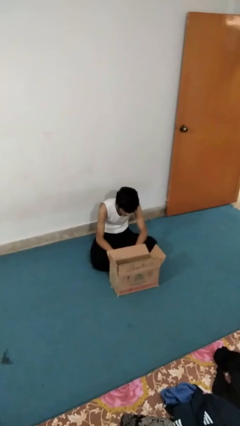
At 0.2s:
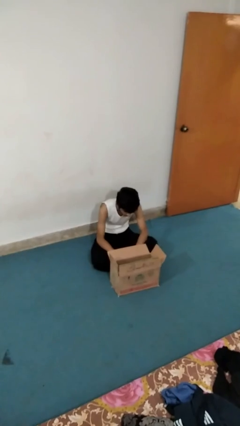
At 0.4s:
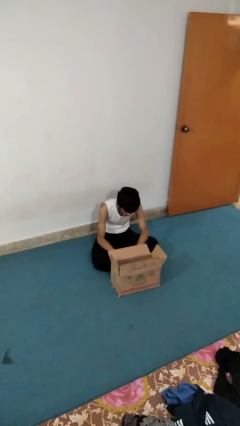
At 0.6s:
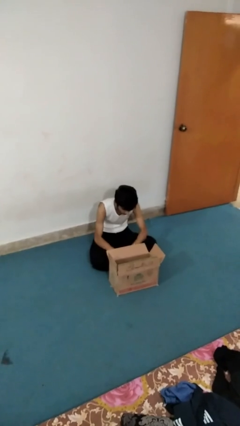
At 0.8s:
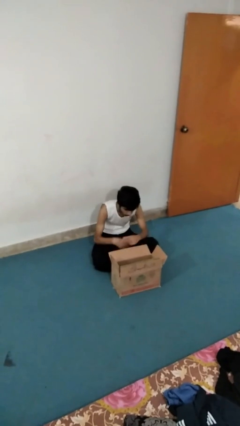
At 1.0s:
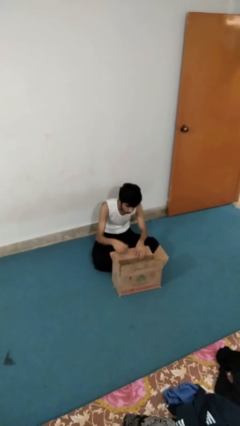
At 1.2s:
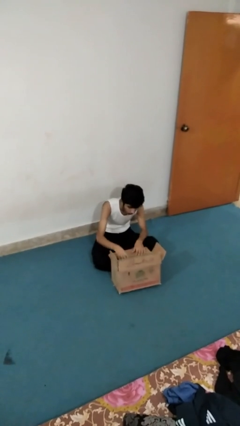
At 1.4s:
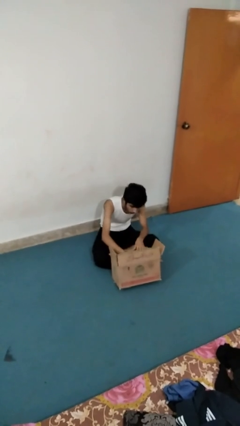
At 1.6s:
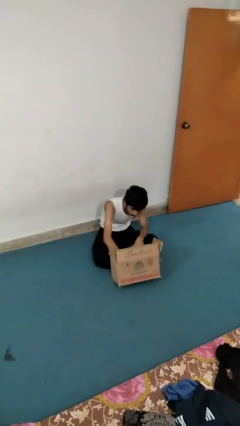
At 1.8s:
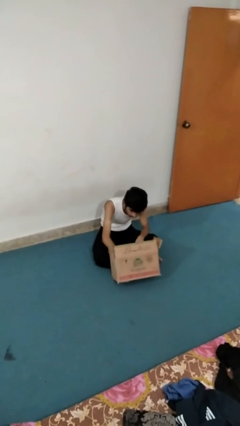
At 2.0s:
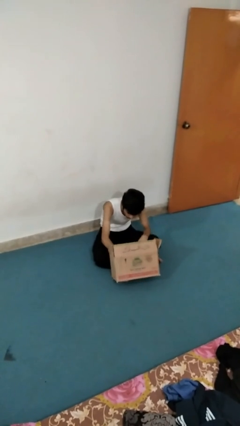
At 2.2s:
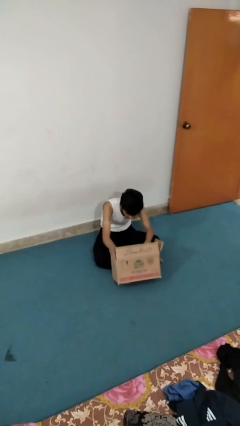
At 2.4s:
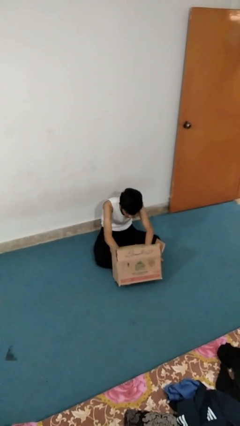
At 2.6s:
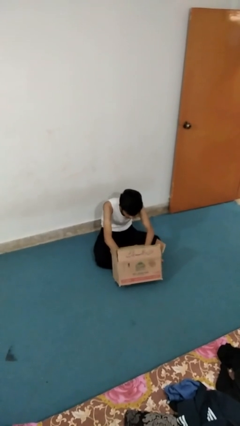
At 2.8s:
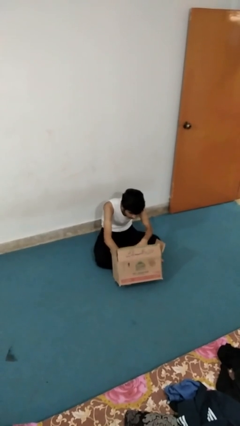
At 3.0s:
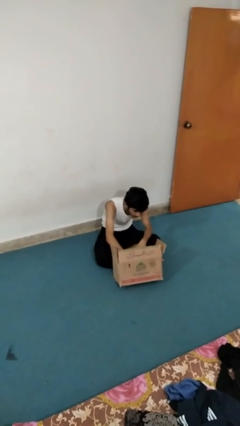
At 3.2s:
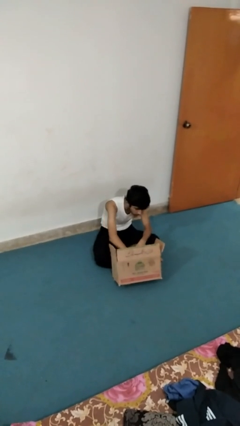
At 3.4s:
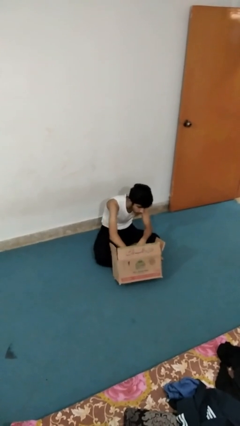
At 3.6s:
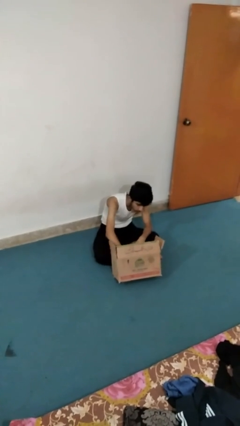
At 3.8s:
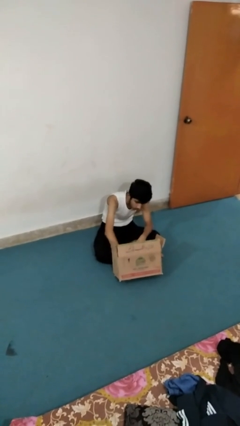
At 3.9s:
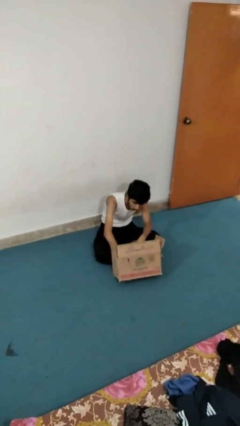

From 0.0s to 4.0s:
person searches in box

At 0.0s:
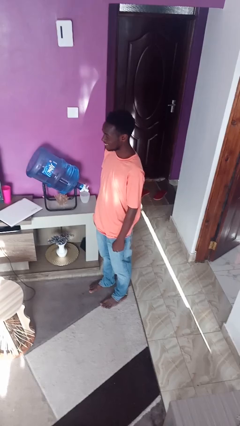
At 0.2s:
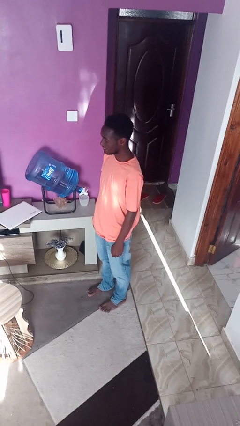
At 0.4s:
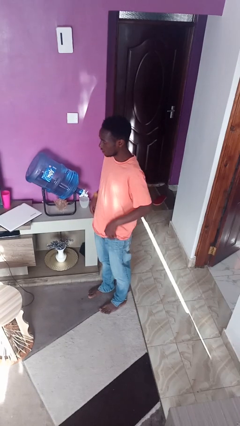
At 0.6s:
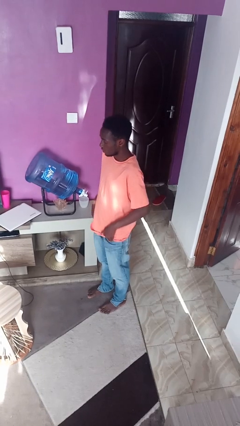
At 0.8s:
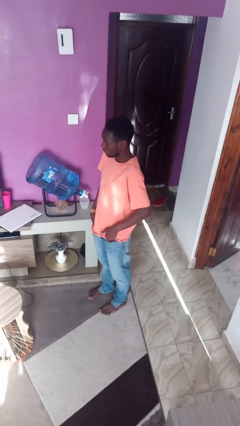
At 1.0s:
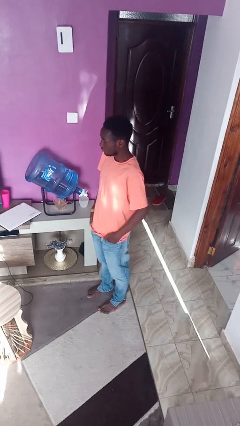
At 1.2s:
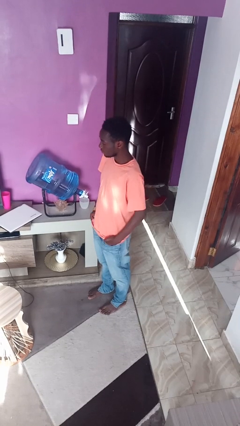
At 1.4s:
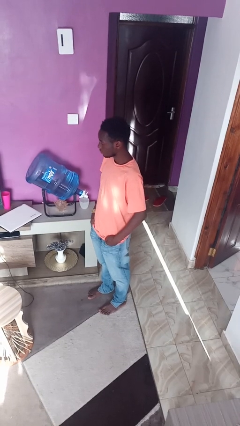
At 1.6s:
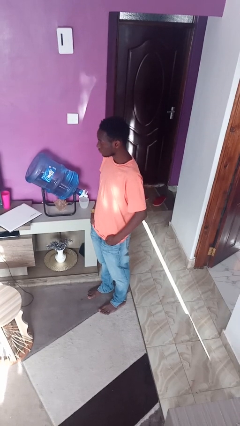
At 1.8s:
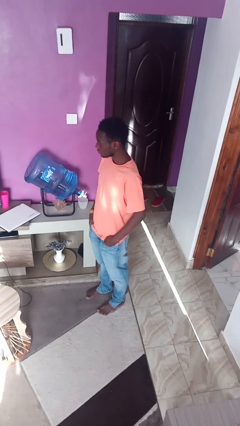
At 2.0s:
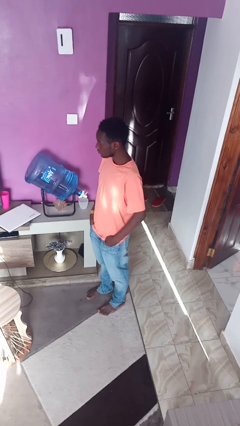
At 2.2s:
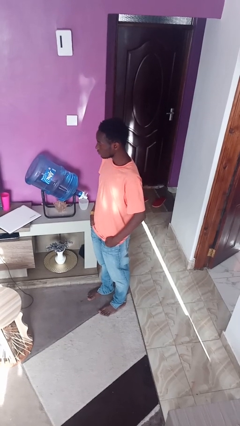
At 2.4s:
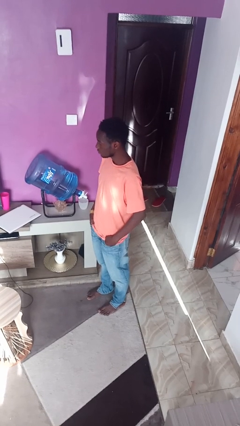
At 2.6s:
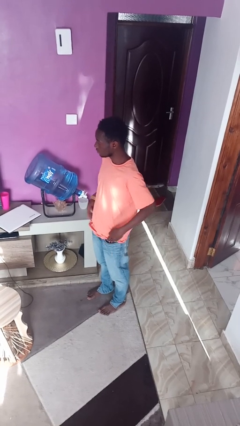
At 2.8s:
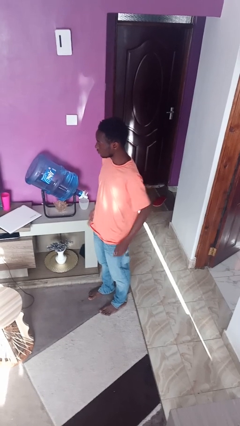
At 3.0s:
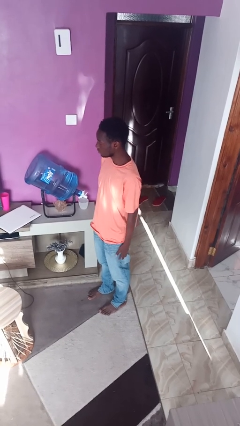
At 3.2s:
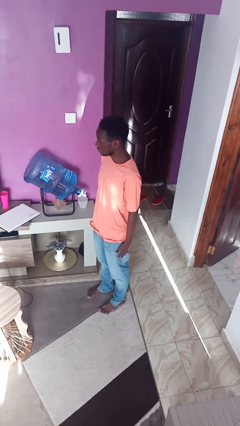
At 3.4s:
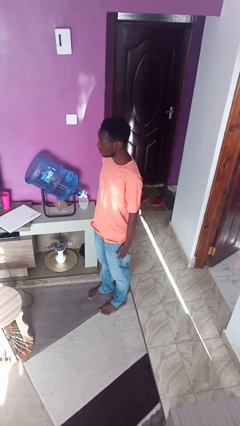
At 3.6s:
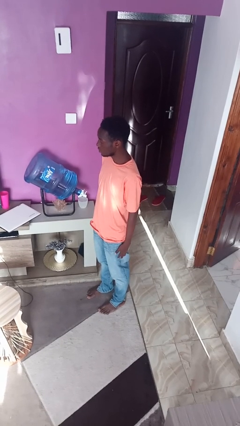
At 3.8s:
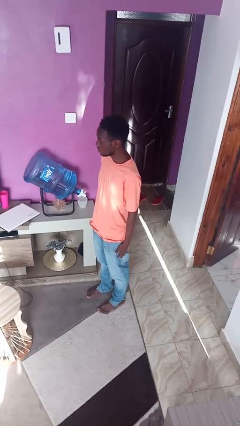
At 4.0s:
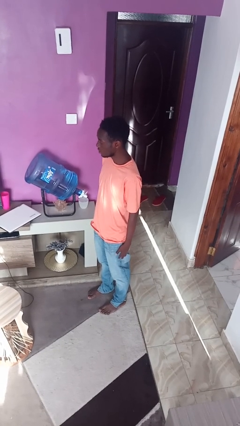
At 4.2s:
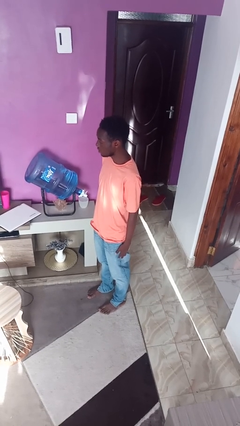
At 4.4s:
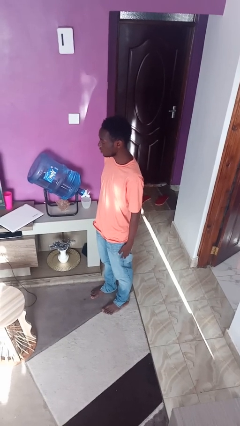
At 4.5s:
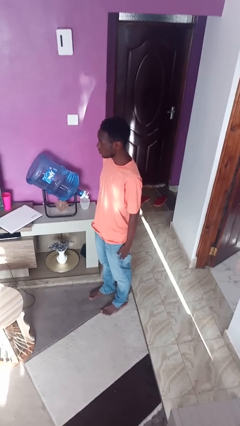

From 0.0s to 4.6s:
person puts hands in back pockets

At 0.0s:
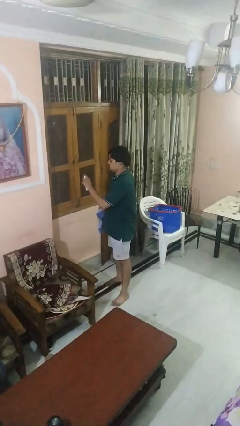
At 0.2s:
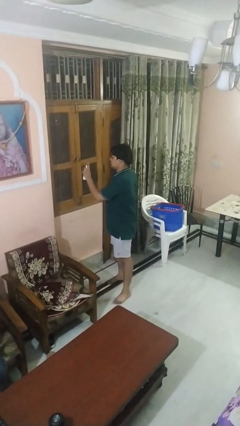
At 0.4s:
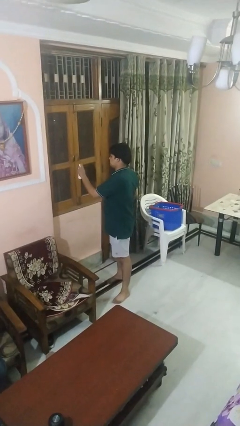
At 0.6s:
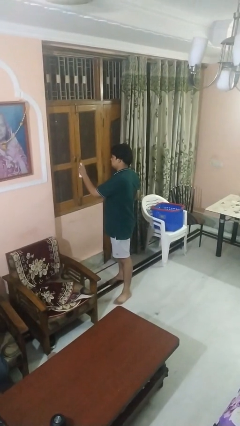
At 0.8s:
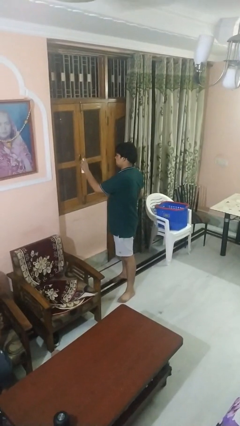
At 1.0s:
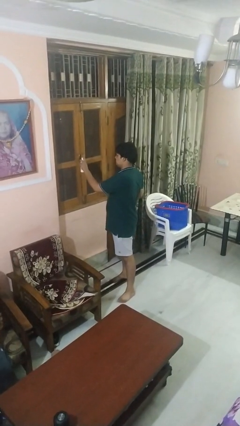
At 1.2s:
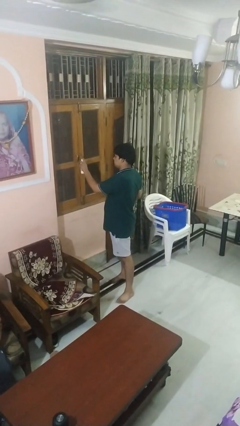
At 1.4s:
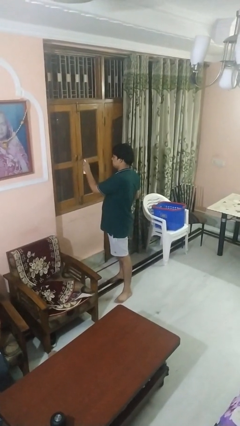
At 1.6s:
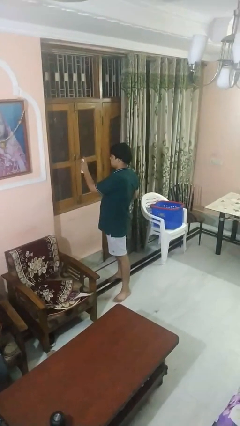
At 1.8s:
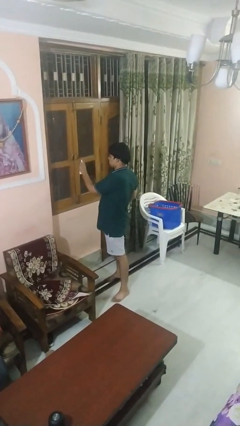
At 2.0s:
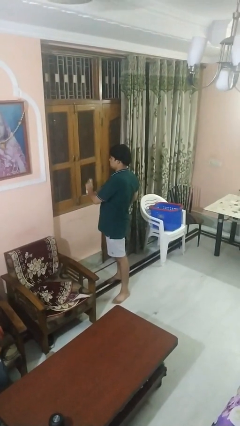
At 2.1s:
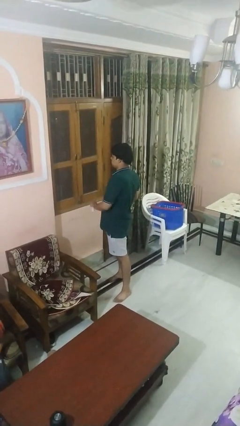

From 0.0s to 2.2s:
person sprays from bottle

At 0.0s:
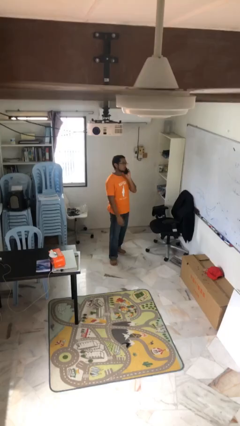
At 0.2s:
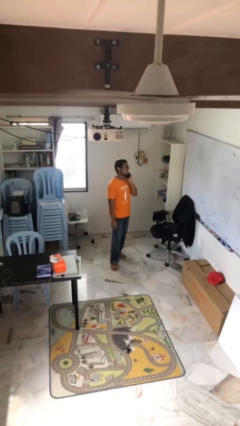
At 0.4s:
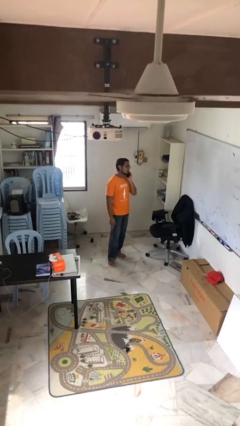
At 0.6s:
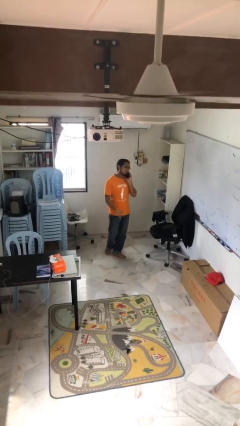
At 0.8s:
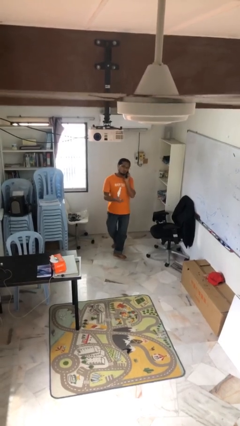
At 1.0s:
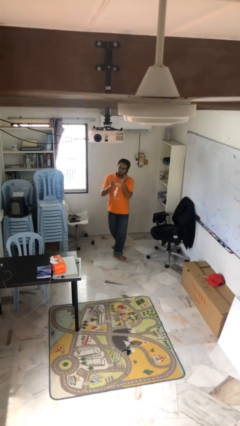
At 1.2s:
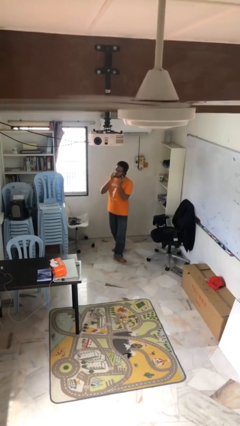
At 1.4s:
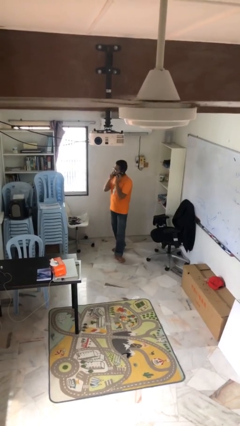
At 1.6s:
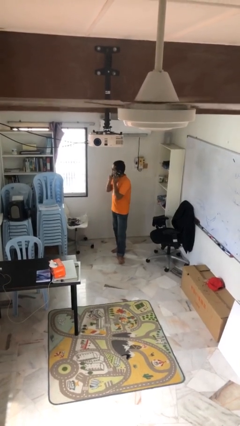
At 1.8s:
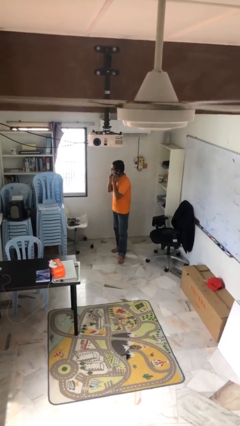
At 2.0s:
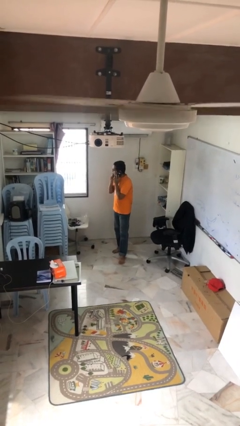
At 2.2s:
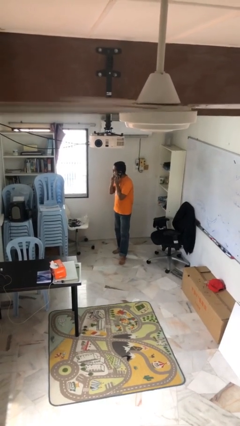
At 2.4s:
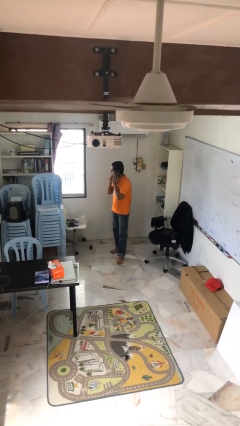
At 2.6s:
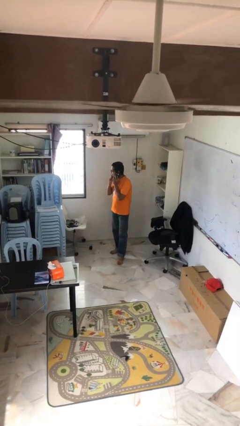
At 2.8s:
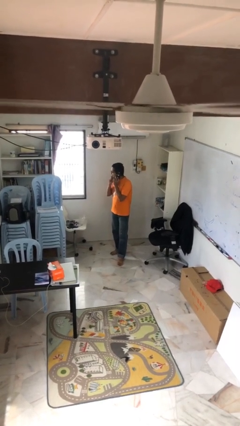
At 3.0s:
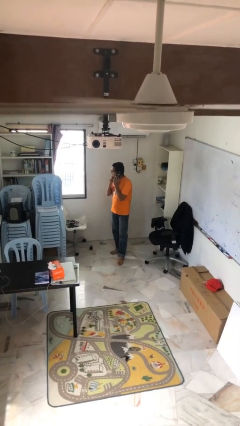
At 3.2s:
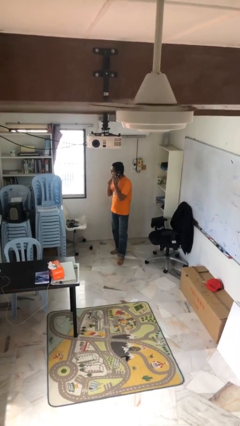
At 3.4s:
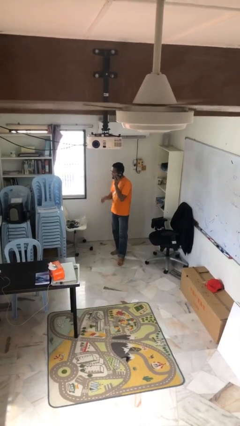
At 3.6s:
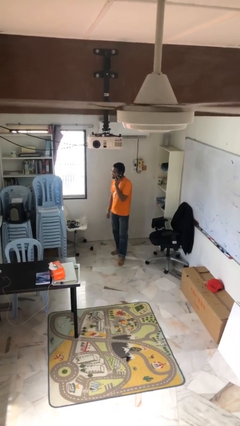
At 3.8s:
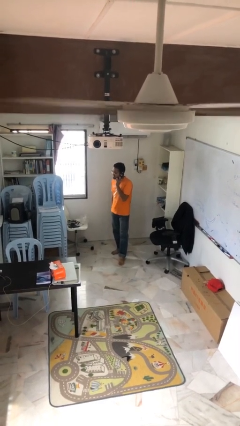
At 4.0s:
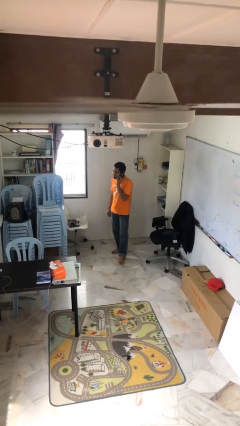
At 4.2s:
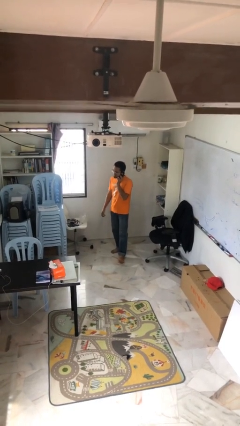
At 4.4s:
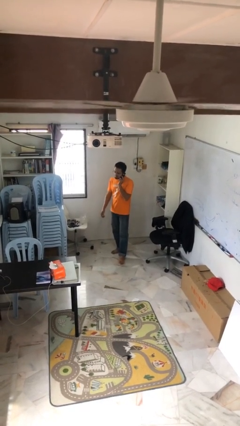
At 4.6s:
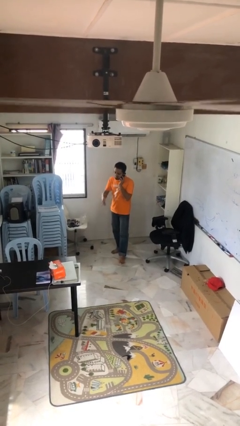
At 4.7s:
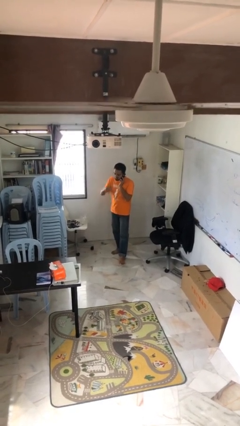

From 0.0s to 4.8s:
person talks on phone

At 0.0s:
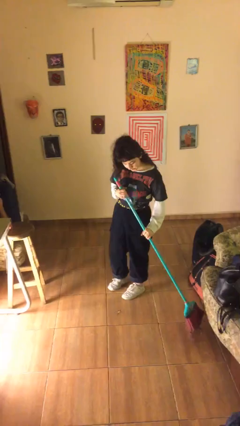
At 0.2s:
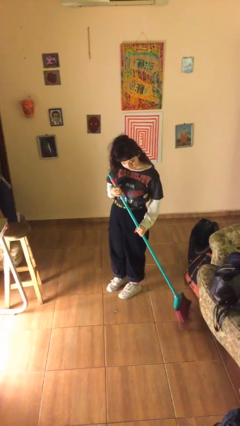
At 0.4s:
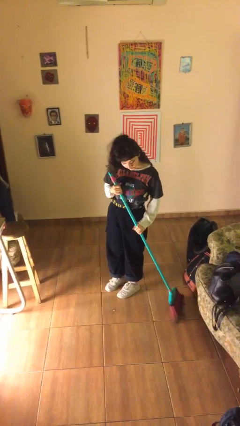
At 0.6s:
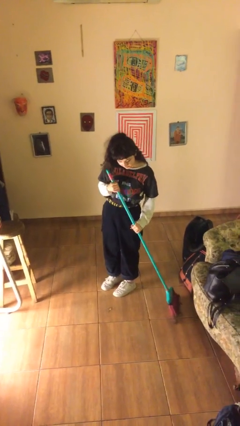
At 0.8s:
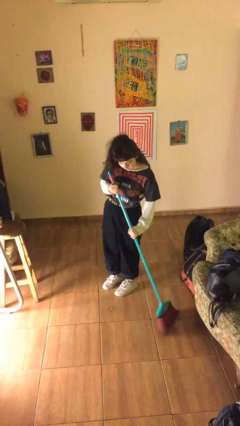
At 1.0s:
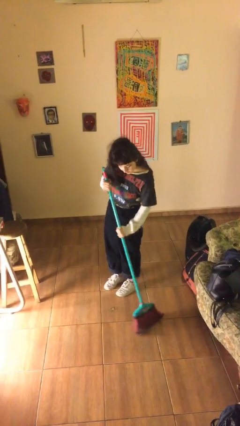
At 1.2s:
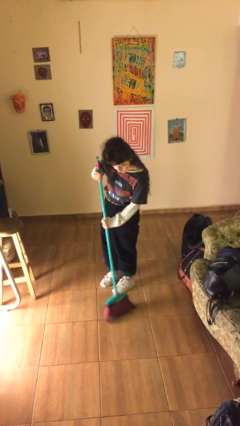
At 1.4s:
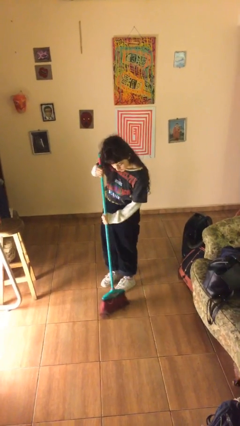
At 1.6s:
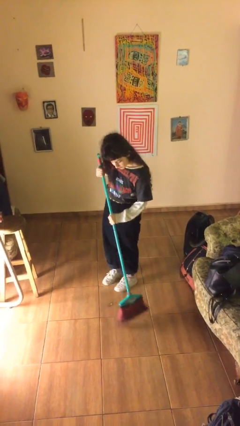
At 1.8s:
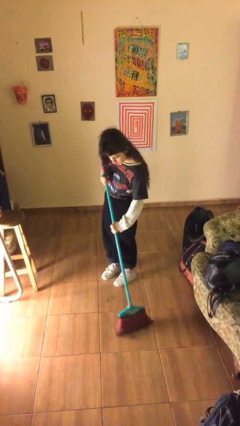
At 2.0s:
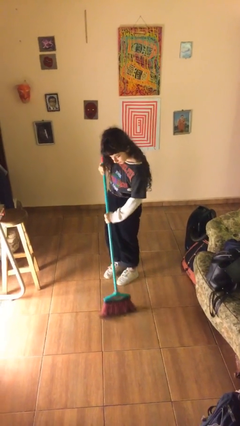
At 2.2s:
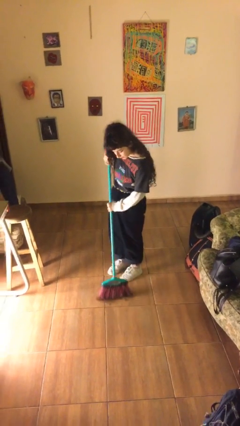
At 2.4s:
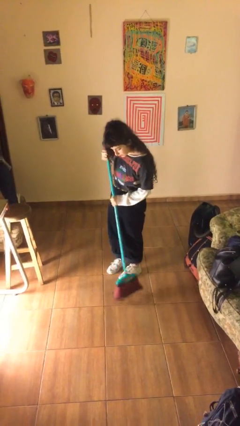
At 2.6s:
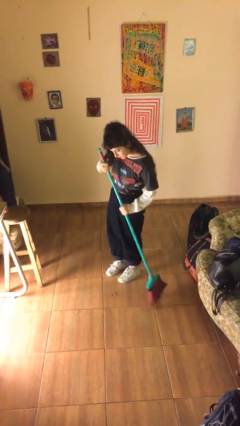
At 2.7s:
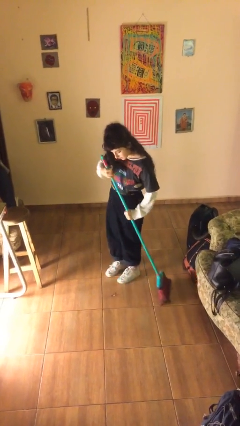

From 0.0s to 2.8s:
person sweeps floor
